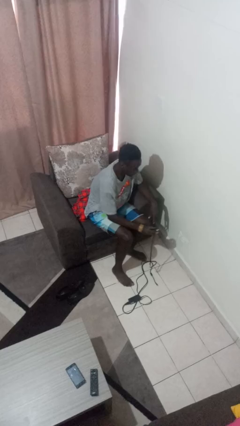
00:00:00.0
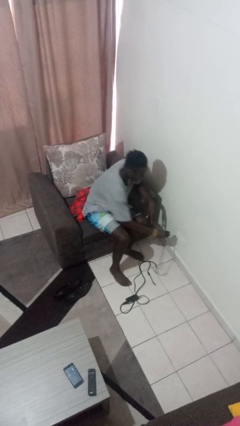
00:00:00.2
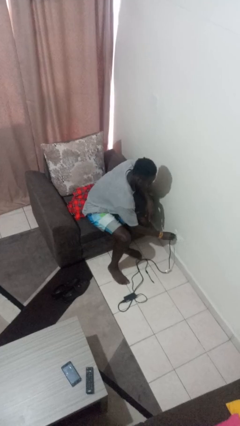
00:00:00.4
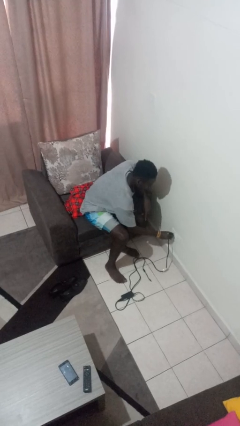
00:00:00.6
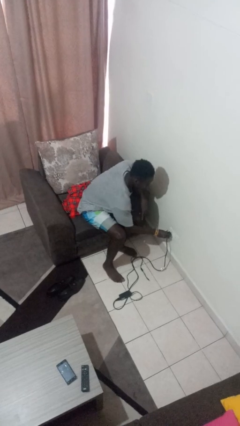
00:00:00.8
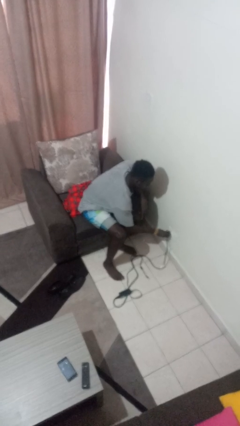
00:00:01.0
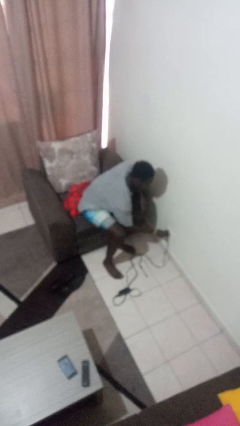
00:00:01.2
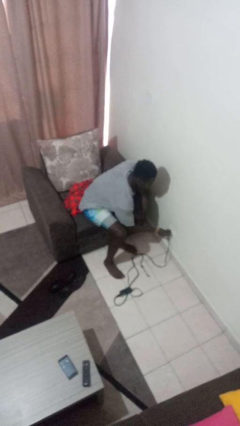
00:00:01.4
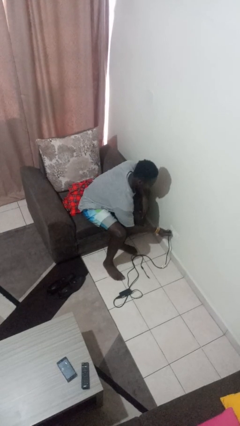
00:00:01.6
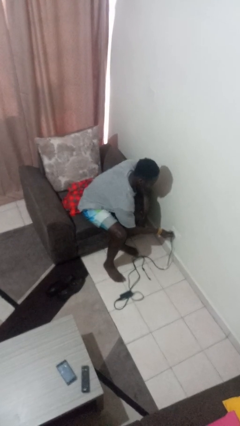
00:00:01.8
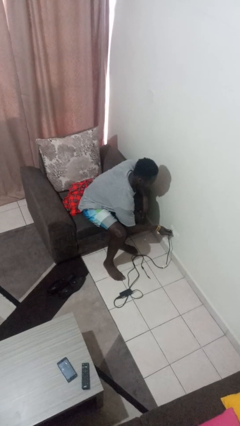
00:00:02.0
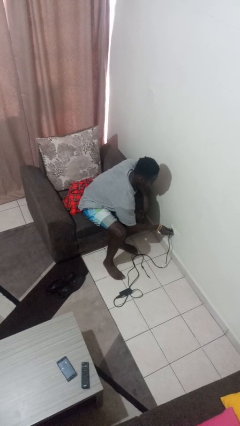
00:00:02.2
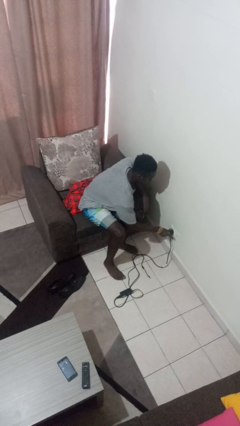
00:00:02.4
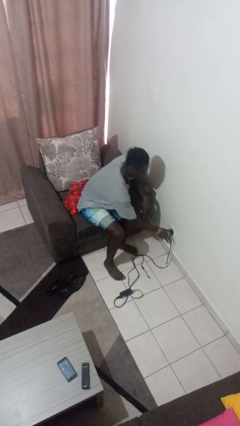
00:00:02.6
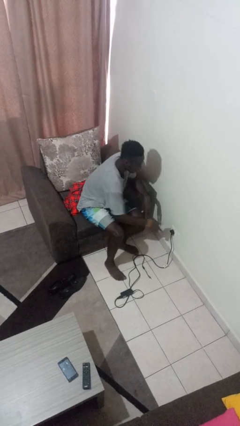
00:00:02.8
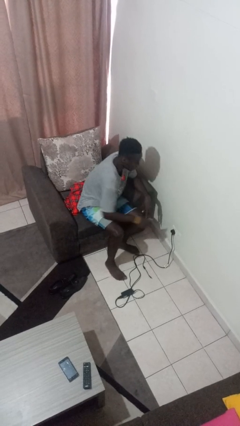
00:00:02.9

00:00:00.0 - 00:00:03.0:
person plugs into electrical socket

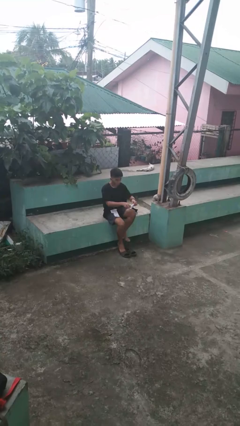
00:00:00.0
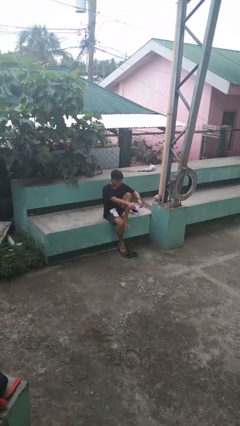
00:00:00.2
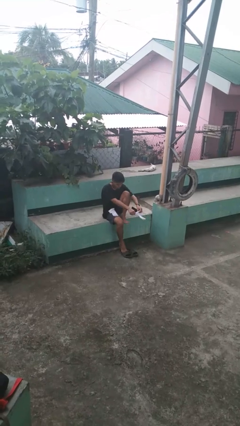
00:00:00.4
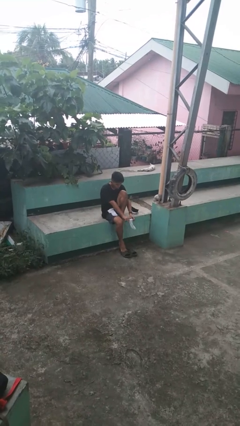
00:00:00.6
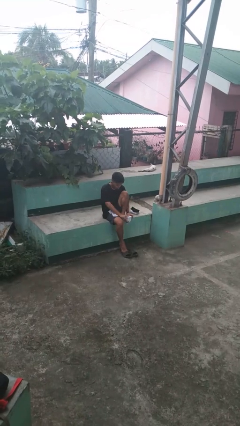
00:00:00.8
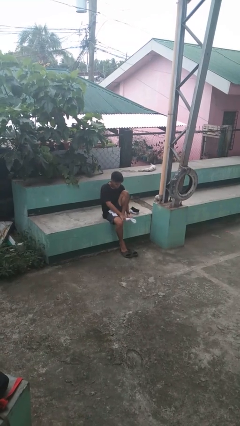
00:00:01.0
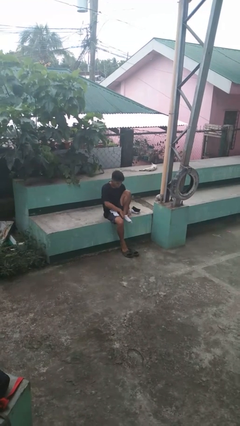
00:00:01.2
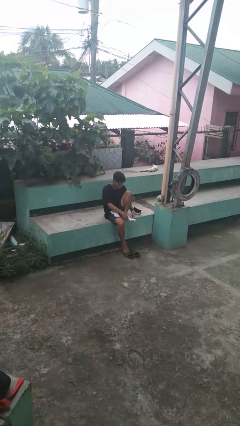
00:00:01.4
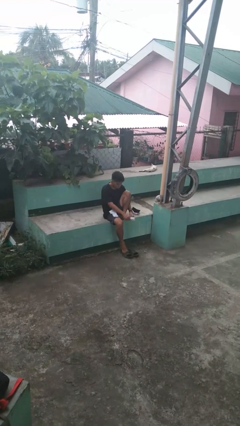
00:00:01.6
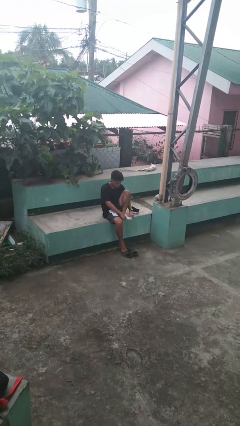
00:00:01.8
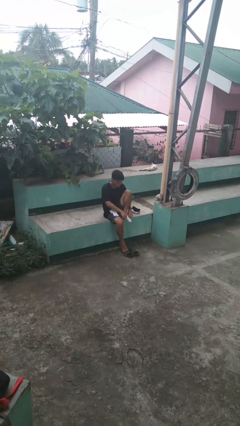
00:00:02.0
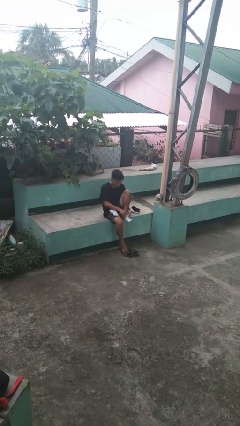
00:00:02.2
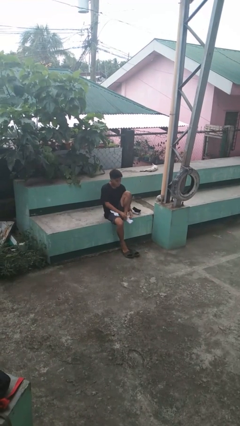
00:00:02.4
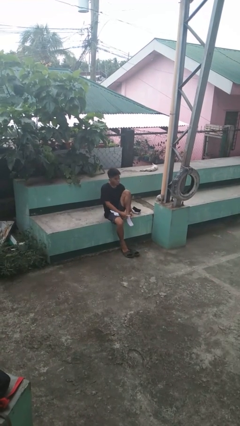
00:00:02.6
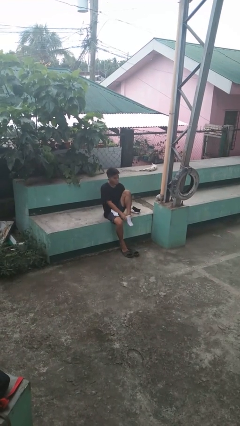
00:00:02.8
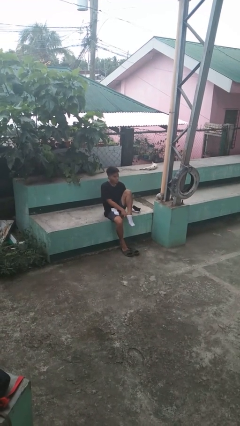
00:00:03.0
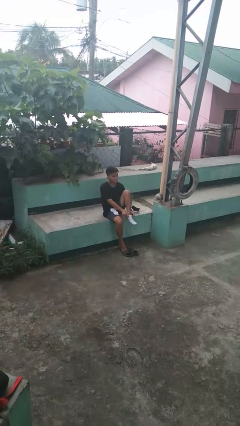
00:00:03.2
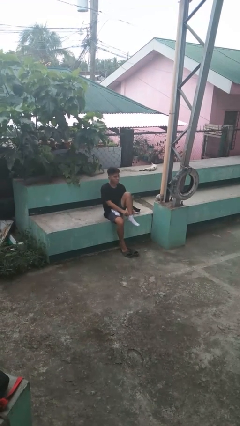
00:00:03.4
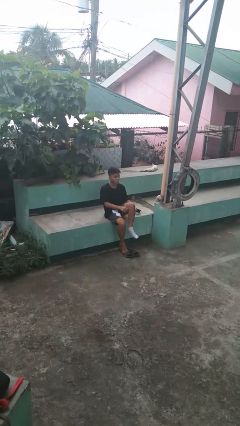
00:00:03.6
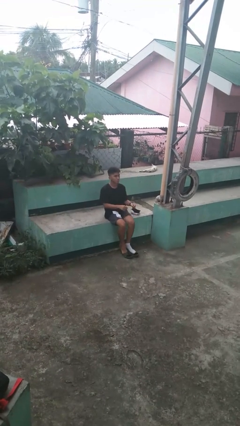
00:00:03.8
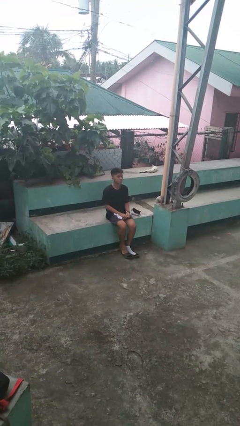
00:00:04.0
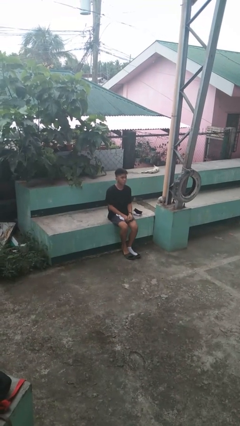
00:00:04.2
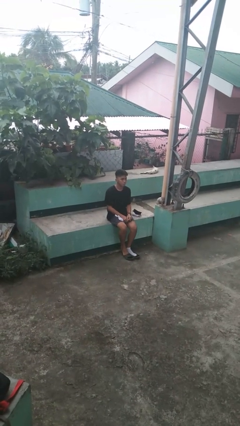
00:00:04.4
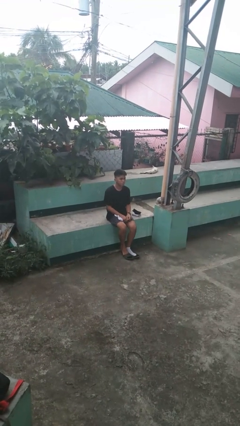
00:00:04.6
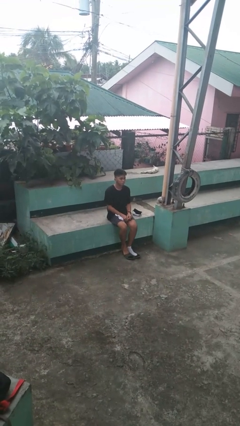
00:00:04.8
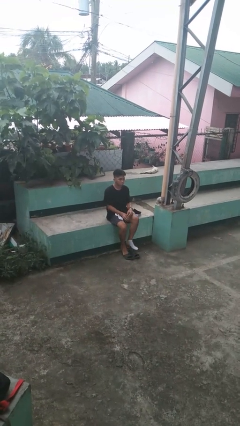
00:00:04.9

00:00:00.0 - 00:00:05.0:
person puts on socks

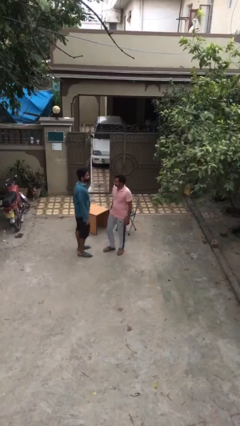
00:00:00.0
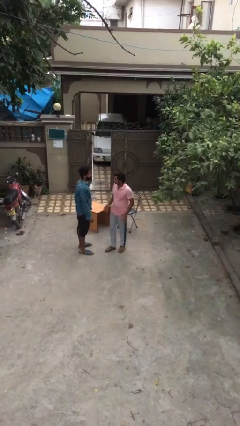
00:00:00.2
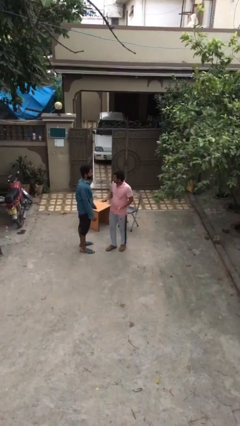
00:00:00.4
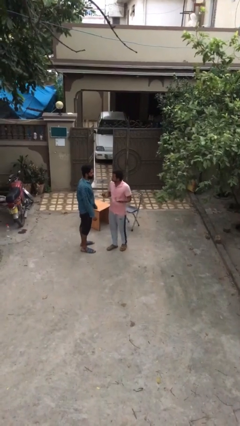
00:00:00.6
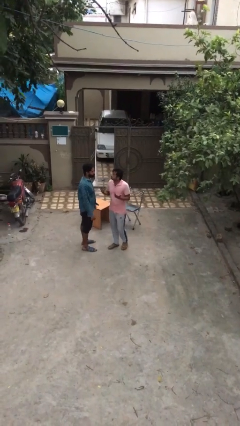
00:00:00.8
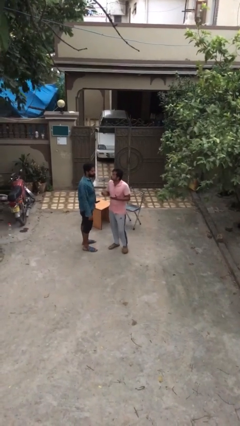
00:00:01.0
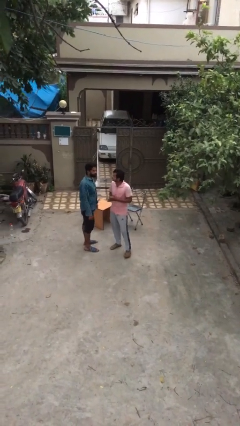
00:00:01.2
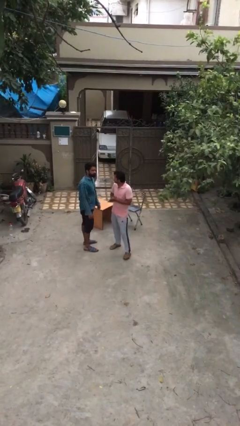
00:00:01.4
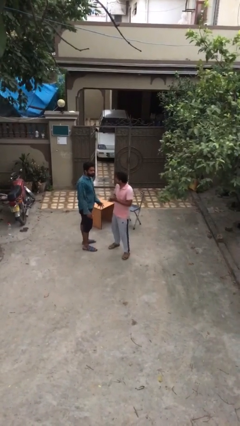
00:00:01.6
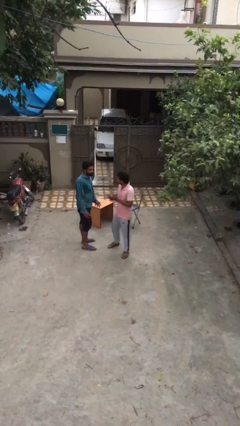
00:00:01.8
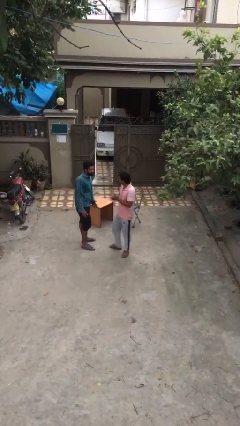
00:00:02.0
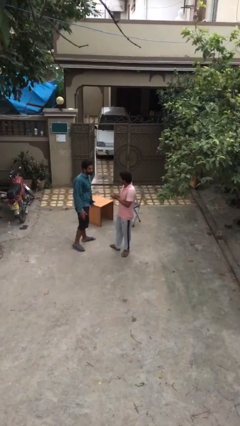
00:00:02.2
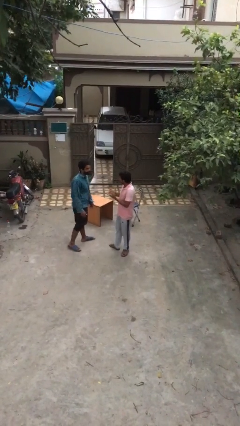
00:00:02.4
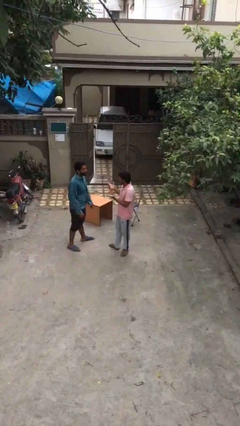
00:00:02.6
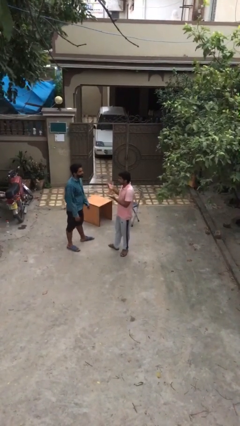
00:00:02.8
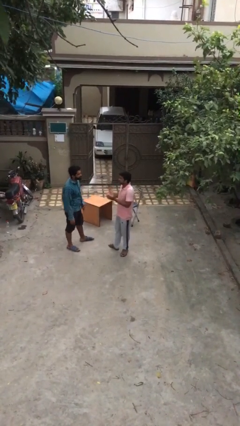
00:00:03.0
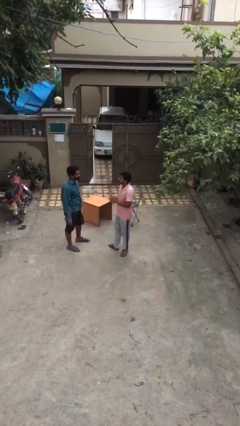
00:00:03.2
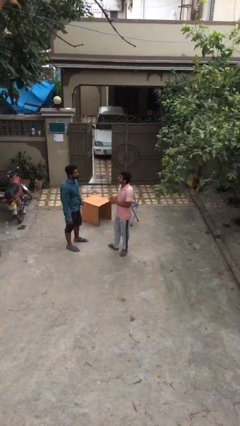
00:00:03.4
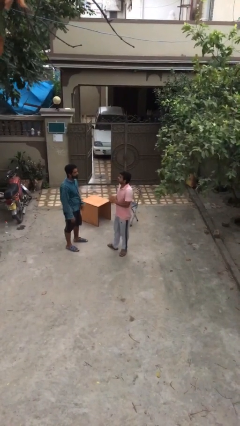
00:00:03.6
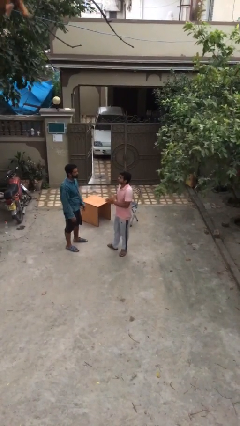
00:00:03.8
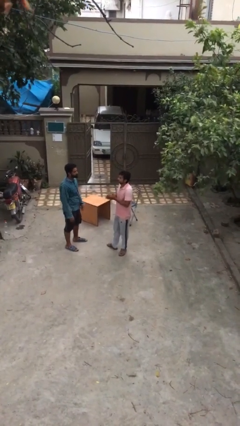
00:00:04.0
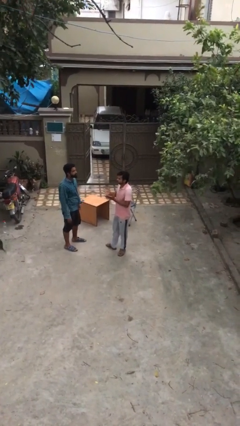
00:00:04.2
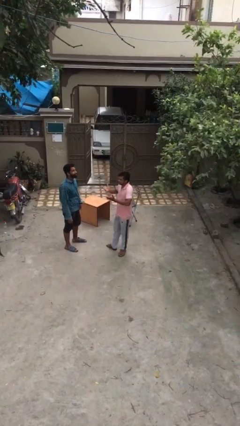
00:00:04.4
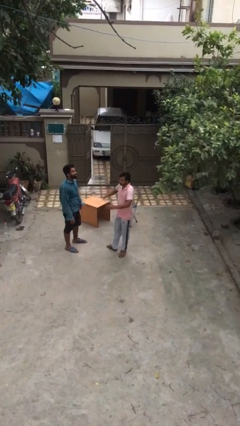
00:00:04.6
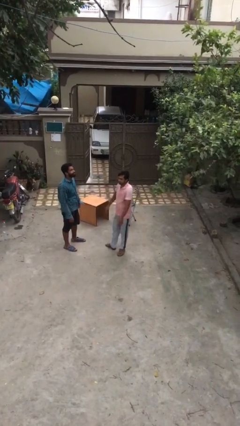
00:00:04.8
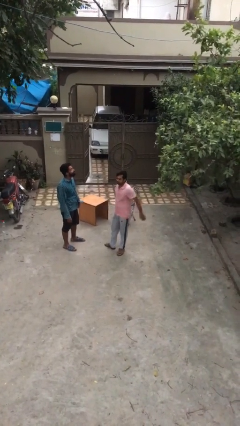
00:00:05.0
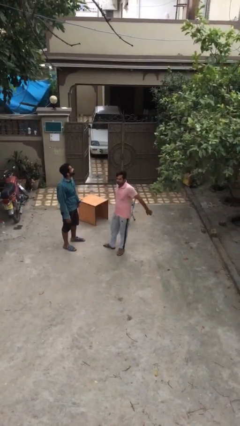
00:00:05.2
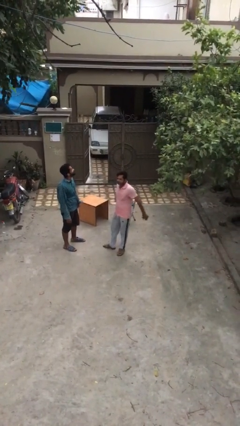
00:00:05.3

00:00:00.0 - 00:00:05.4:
person talks to person

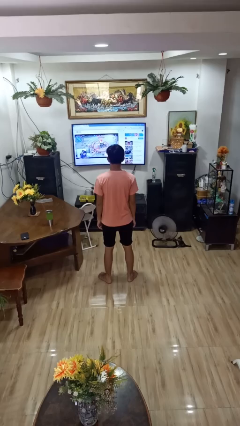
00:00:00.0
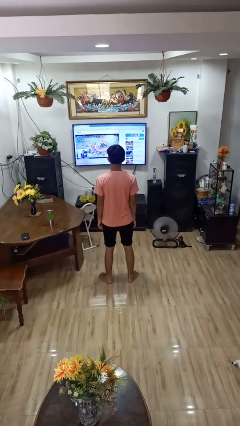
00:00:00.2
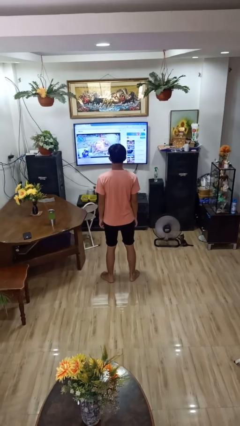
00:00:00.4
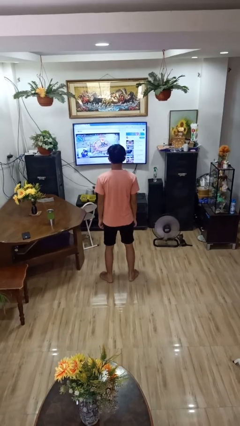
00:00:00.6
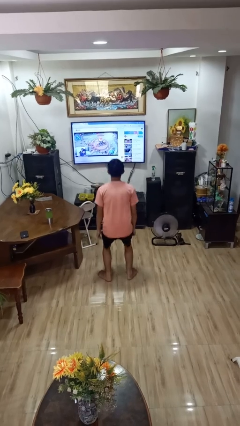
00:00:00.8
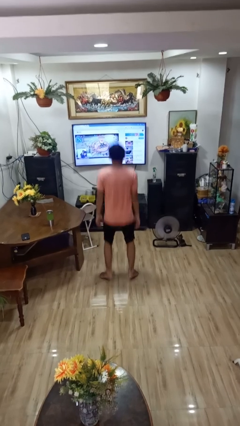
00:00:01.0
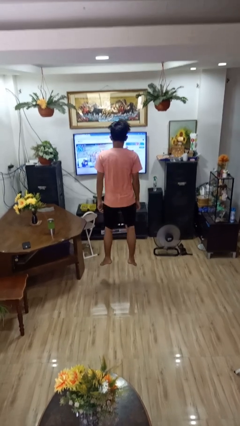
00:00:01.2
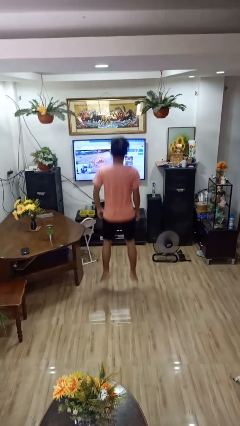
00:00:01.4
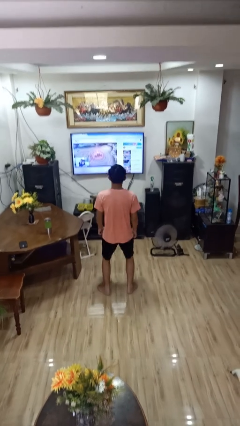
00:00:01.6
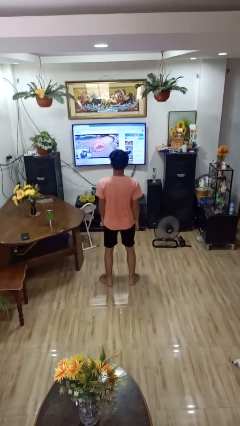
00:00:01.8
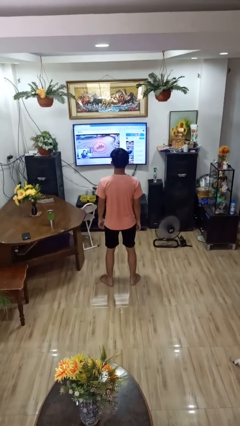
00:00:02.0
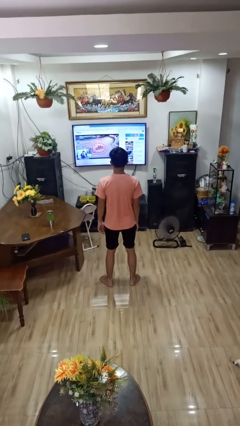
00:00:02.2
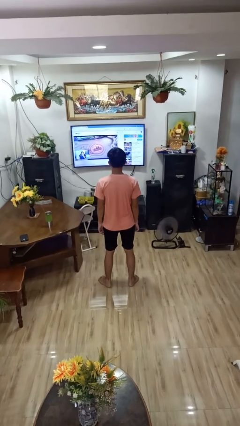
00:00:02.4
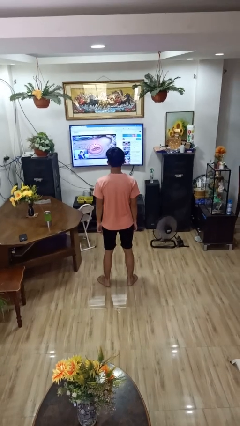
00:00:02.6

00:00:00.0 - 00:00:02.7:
person jumps

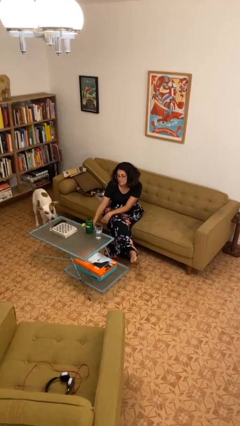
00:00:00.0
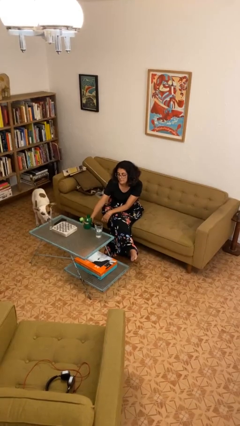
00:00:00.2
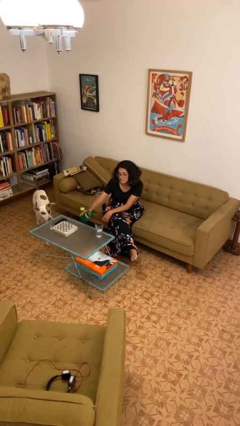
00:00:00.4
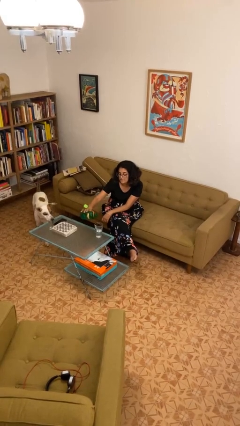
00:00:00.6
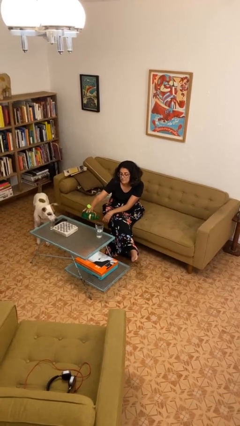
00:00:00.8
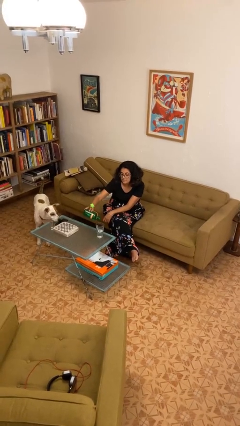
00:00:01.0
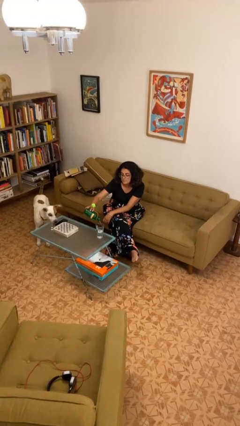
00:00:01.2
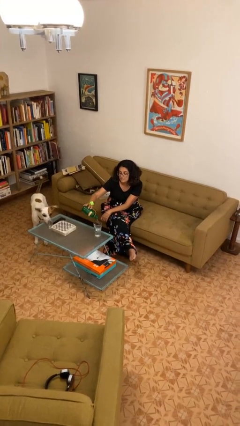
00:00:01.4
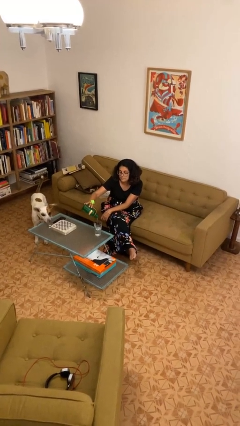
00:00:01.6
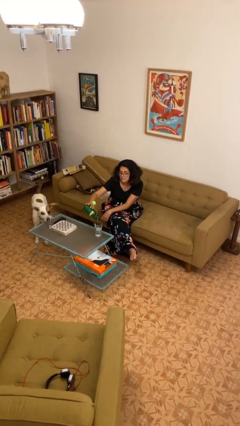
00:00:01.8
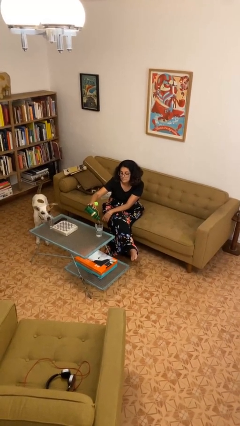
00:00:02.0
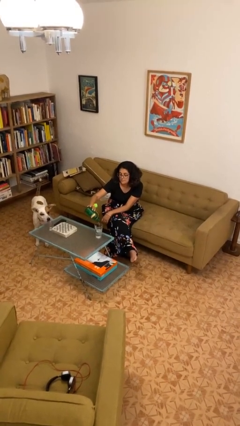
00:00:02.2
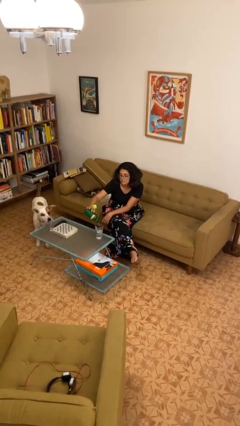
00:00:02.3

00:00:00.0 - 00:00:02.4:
person pours liquid into cup
